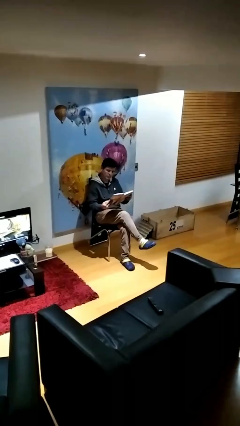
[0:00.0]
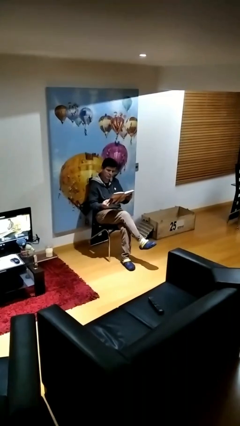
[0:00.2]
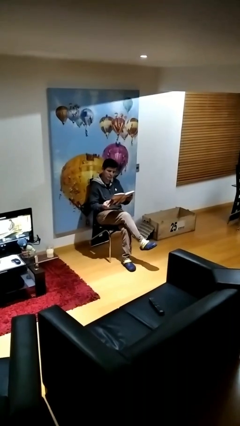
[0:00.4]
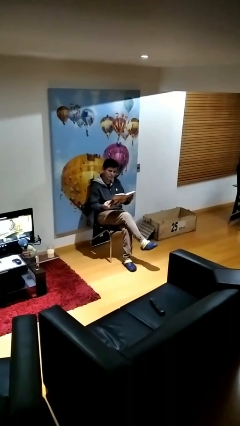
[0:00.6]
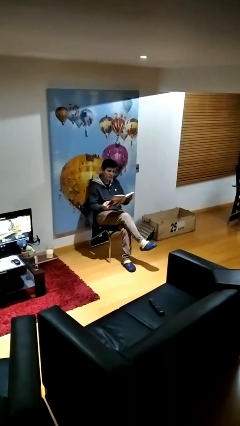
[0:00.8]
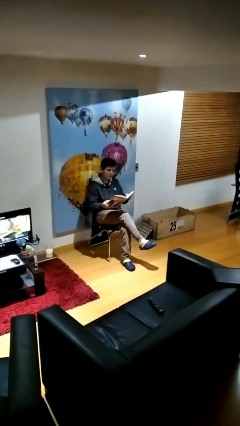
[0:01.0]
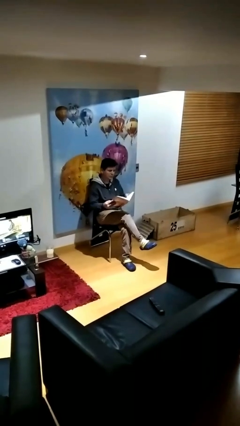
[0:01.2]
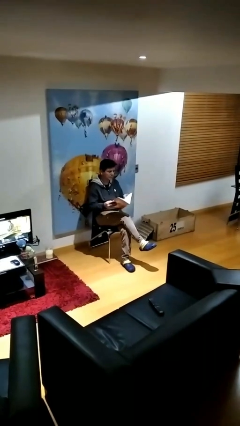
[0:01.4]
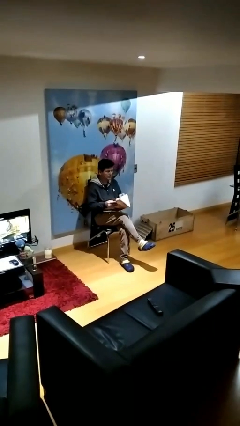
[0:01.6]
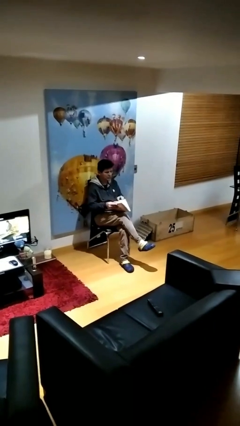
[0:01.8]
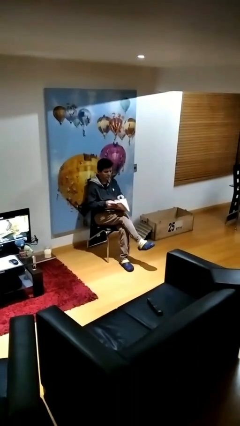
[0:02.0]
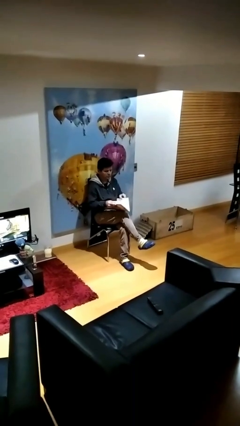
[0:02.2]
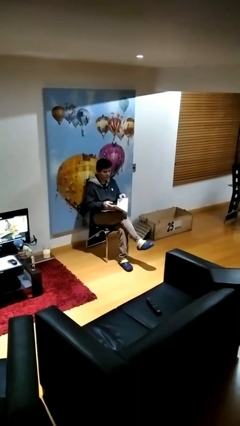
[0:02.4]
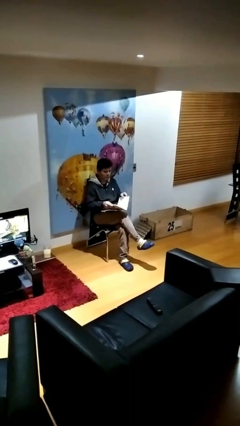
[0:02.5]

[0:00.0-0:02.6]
person reads document

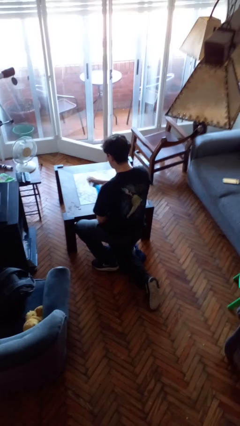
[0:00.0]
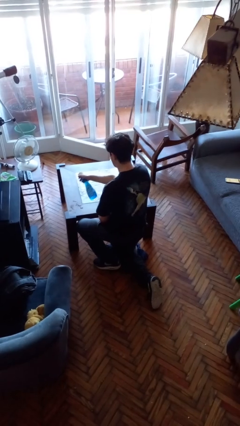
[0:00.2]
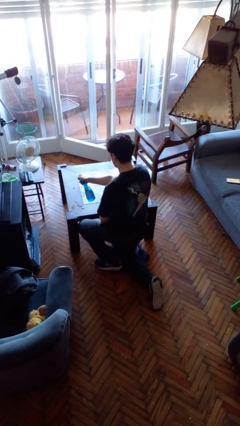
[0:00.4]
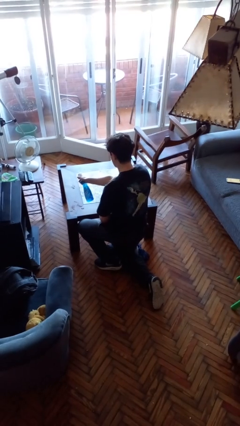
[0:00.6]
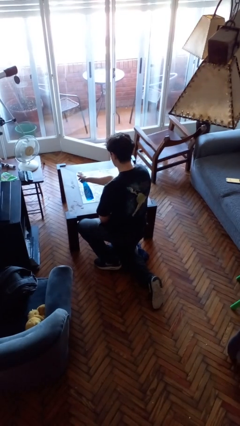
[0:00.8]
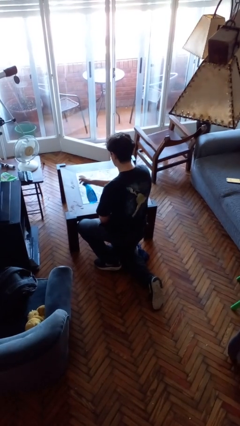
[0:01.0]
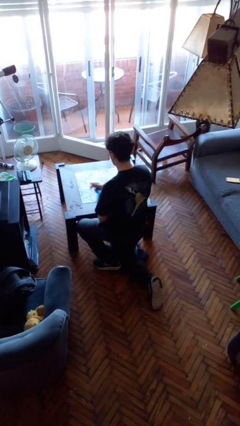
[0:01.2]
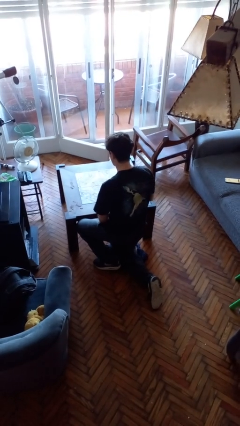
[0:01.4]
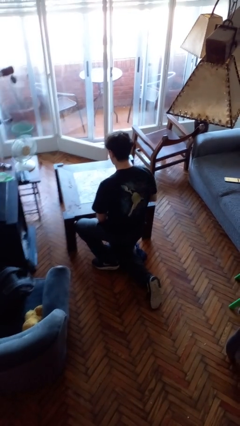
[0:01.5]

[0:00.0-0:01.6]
person sprays from bottle

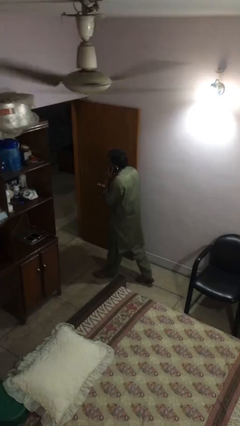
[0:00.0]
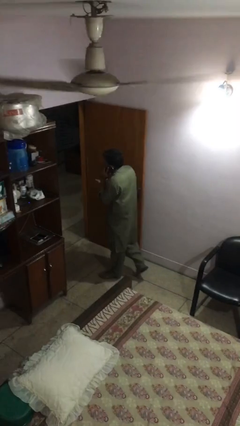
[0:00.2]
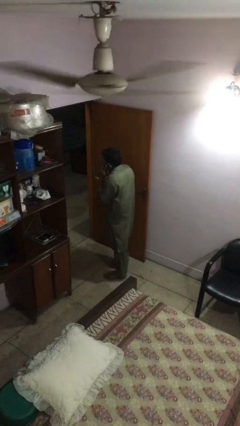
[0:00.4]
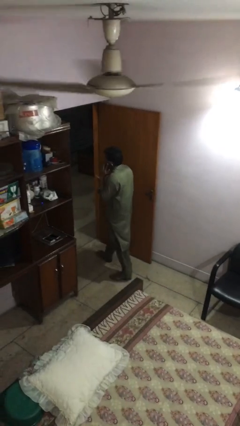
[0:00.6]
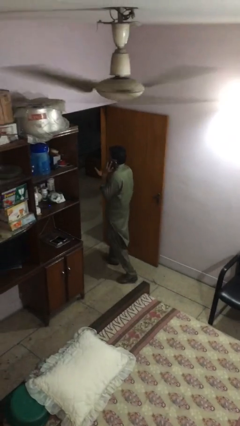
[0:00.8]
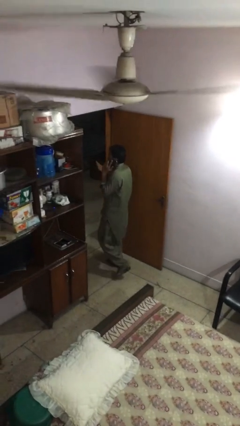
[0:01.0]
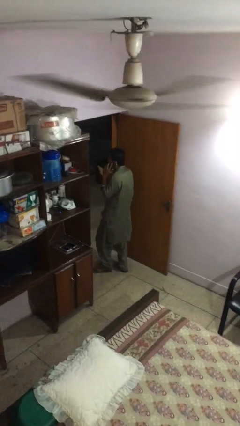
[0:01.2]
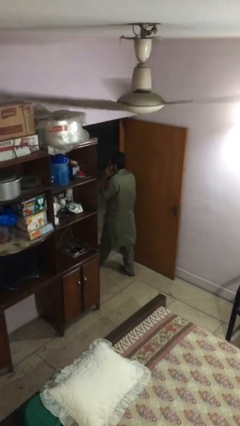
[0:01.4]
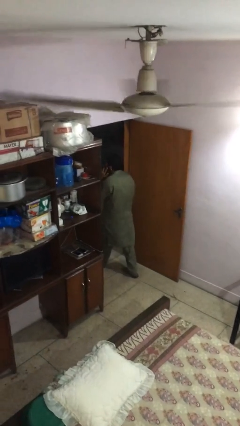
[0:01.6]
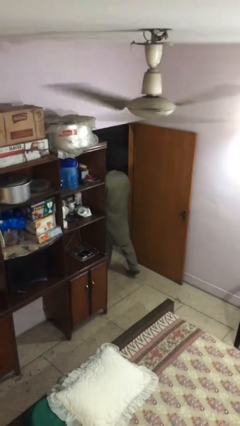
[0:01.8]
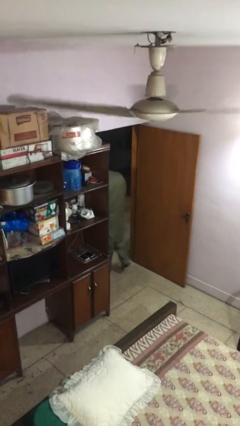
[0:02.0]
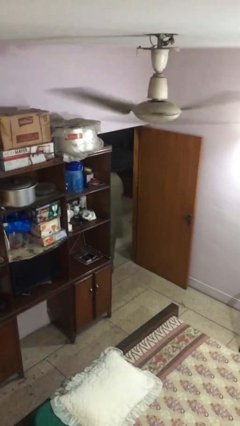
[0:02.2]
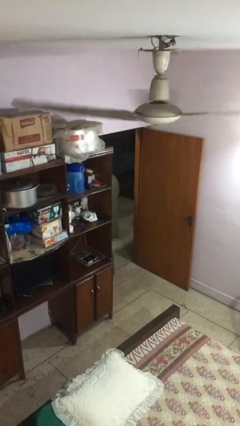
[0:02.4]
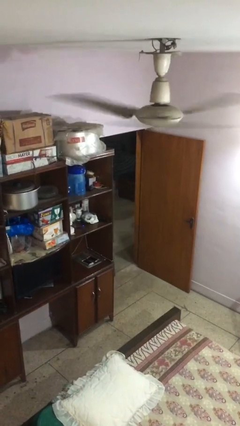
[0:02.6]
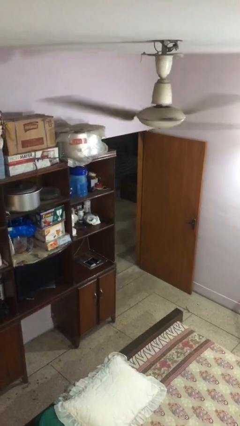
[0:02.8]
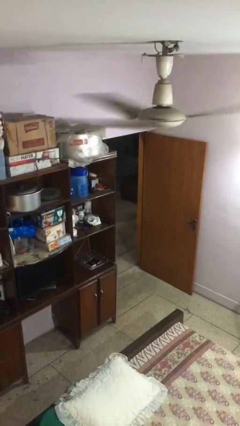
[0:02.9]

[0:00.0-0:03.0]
person exits scene through structure

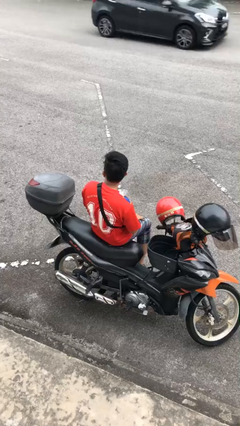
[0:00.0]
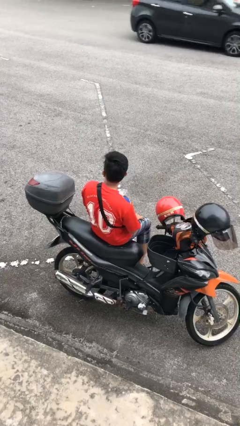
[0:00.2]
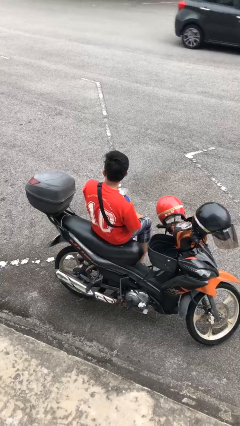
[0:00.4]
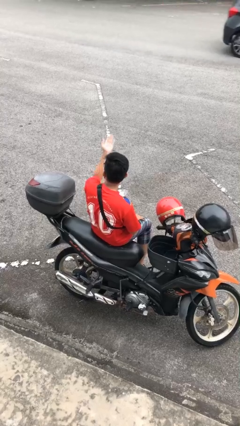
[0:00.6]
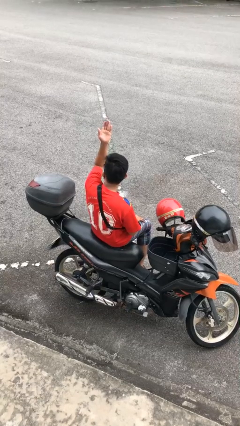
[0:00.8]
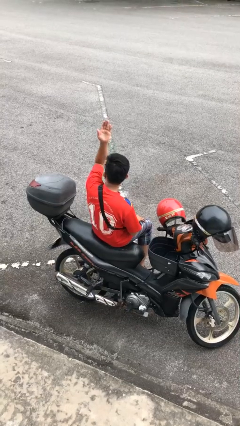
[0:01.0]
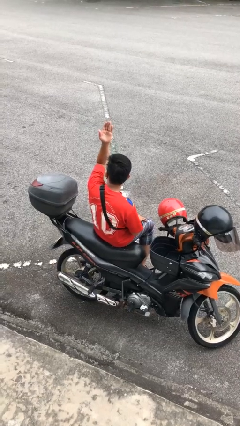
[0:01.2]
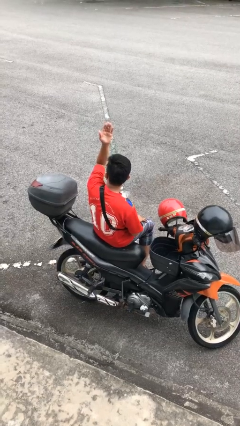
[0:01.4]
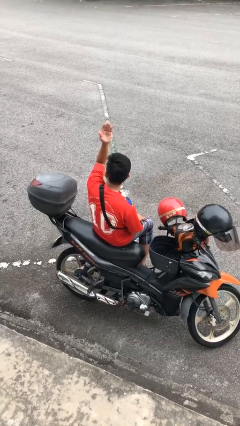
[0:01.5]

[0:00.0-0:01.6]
person gestures swipe up

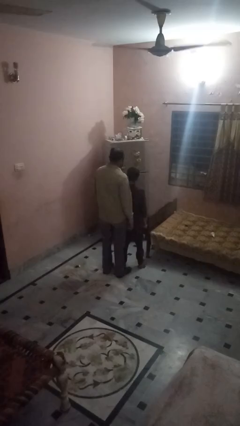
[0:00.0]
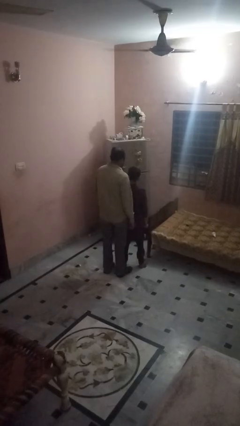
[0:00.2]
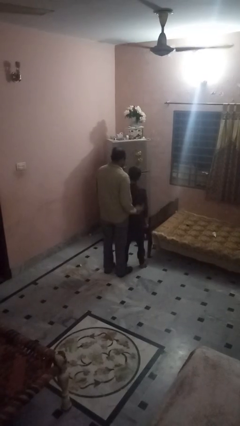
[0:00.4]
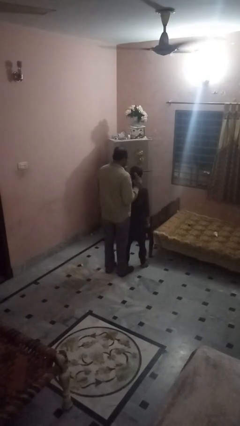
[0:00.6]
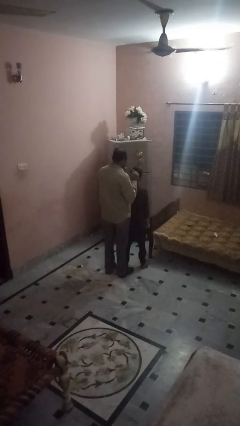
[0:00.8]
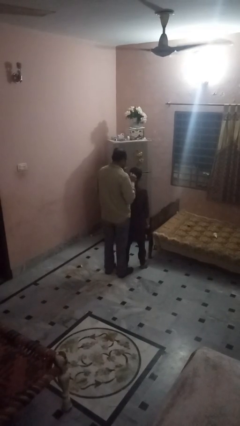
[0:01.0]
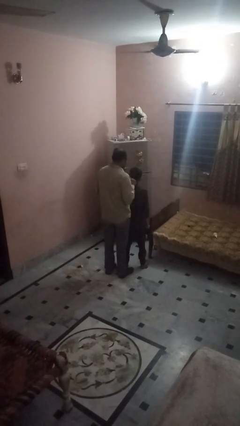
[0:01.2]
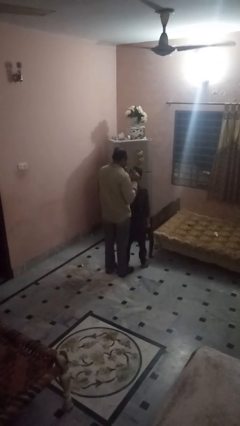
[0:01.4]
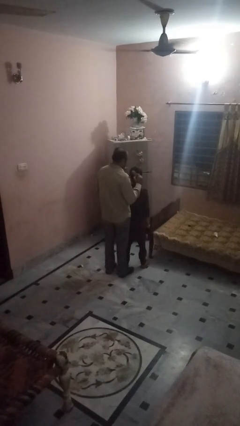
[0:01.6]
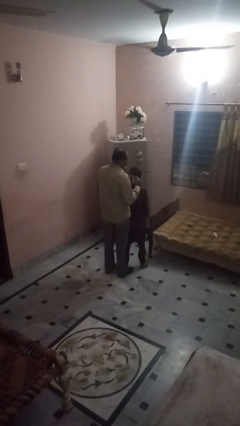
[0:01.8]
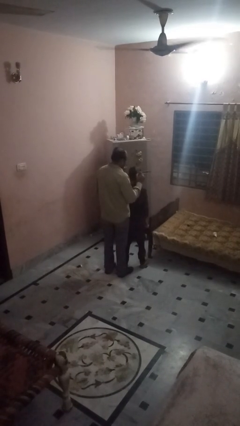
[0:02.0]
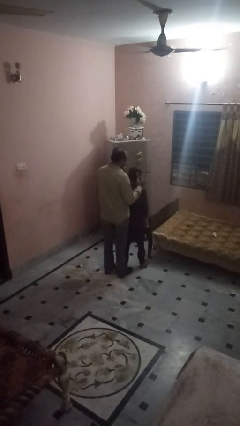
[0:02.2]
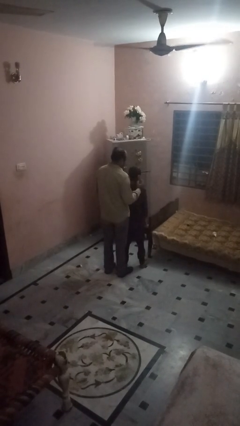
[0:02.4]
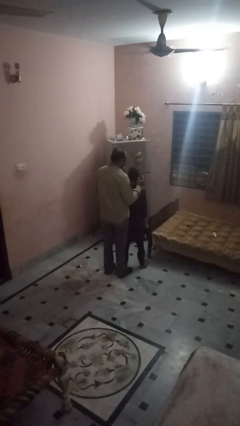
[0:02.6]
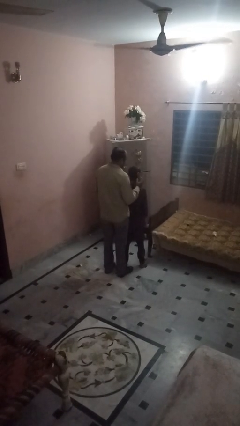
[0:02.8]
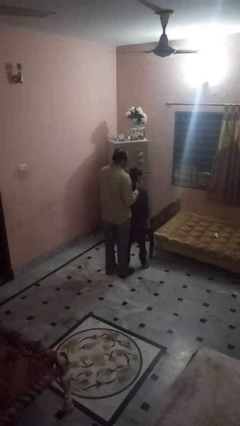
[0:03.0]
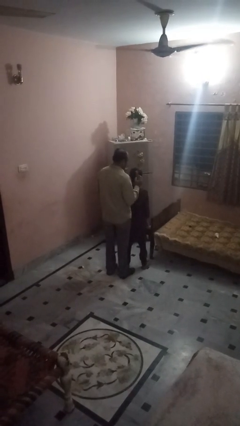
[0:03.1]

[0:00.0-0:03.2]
person brushes hair of person

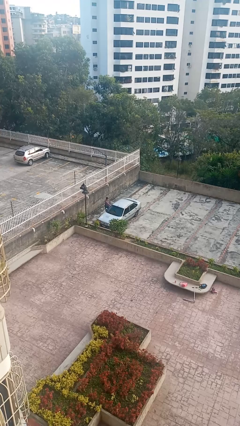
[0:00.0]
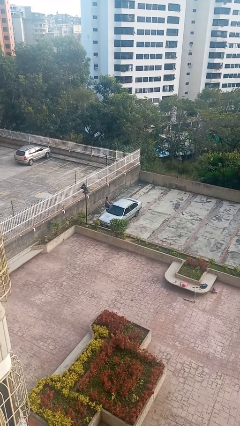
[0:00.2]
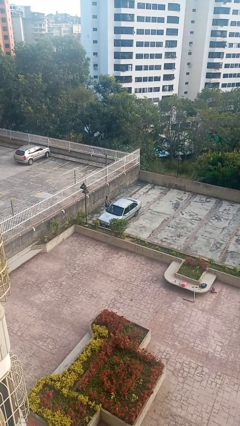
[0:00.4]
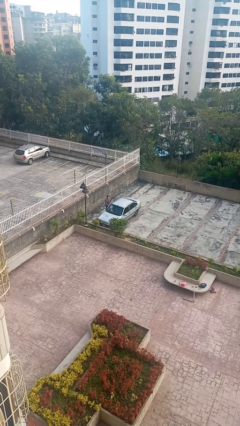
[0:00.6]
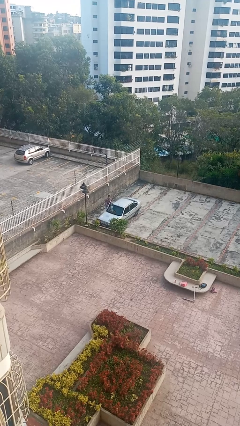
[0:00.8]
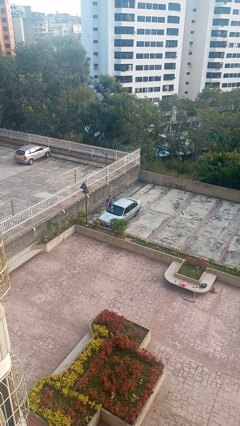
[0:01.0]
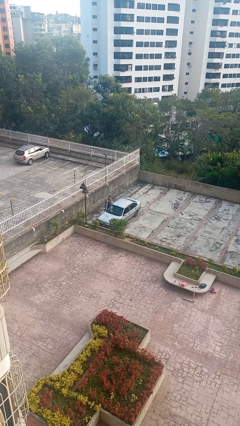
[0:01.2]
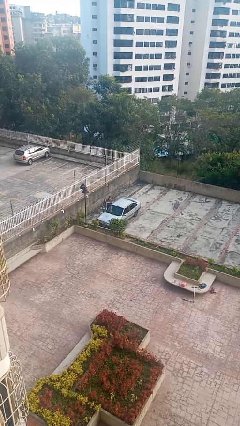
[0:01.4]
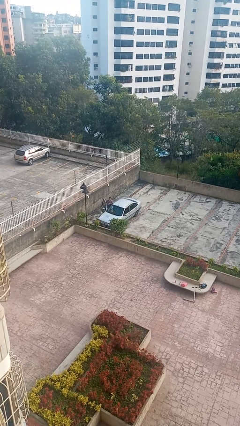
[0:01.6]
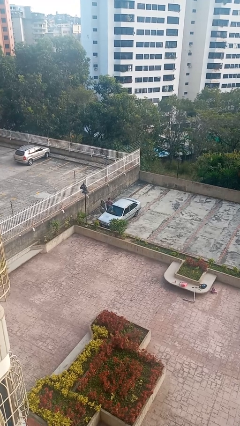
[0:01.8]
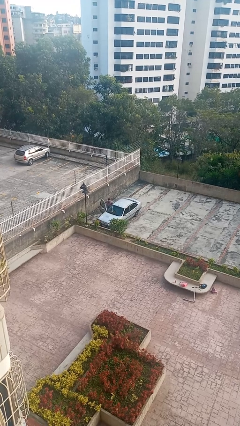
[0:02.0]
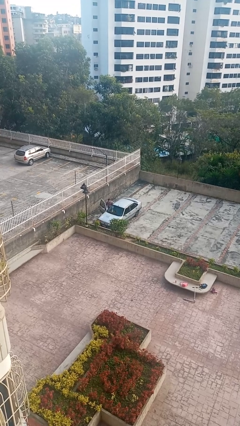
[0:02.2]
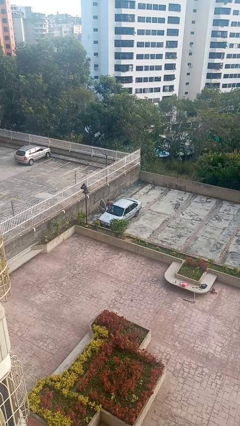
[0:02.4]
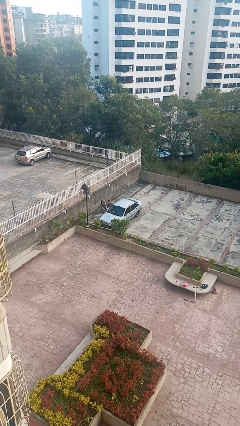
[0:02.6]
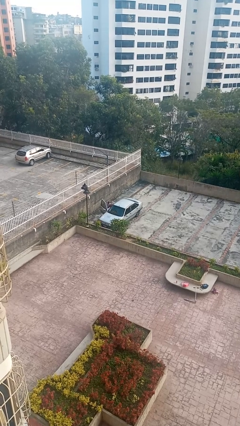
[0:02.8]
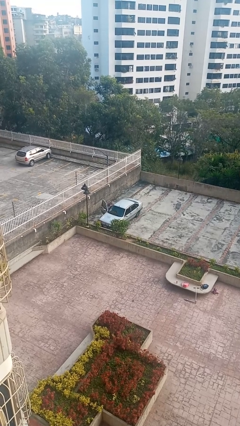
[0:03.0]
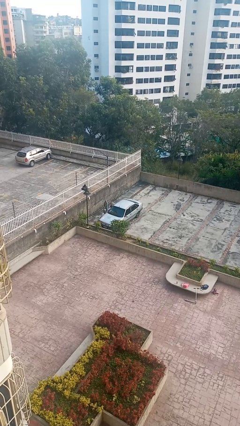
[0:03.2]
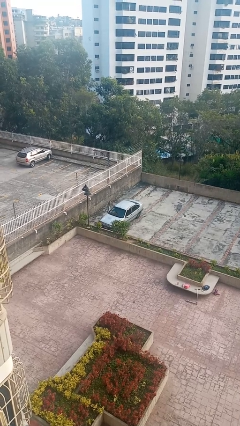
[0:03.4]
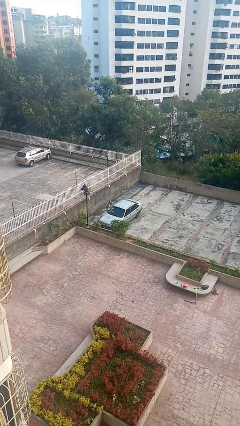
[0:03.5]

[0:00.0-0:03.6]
car picks up person

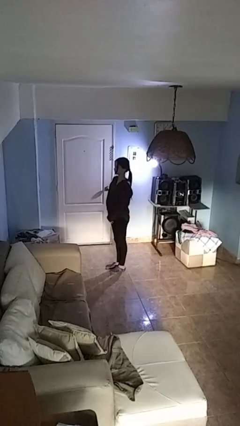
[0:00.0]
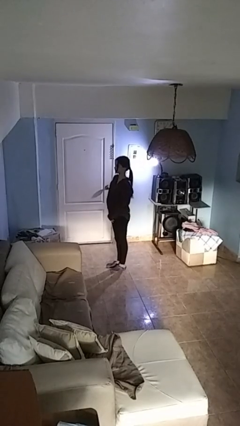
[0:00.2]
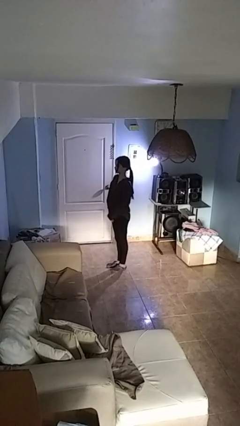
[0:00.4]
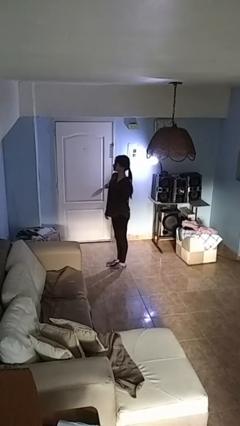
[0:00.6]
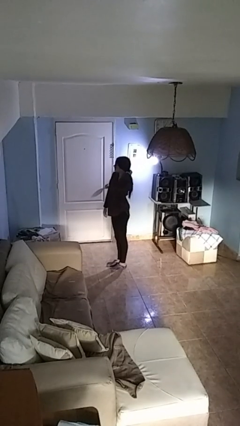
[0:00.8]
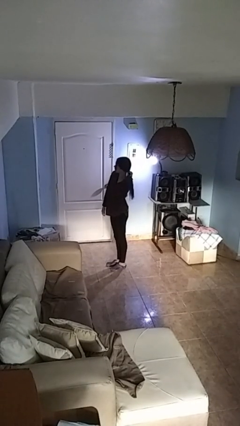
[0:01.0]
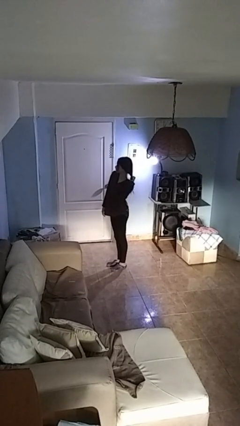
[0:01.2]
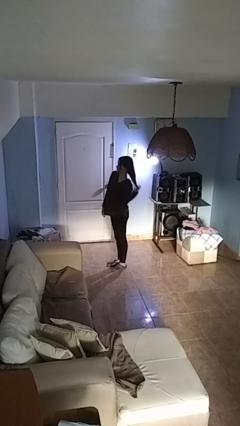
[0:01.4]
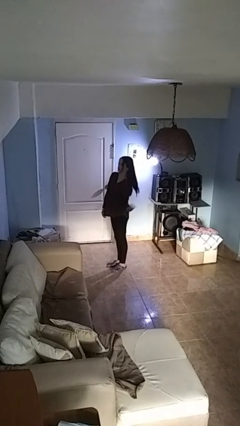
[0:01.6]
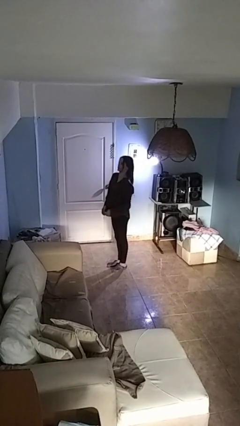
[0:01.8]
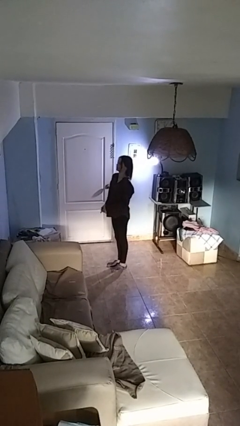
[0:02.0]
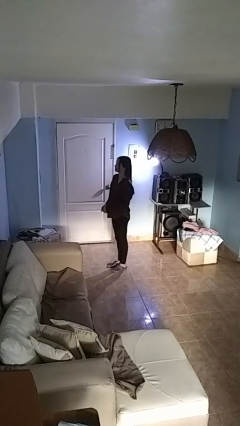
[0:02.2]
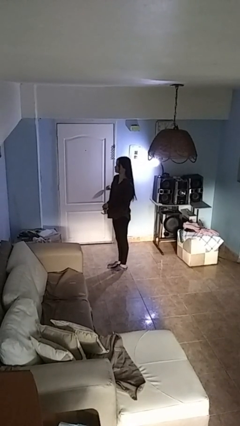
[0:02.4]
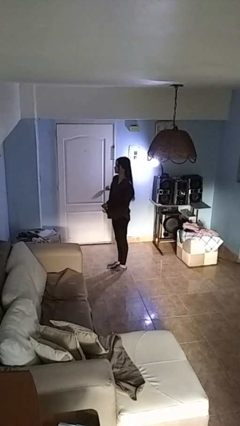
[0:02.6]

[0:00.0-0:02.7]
person takes off hairtie
